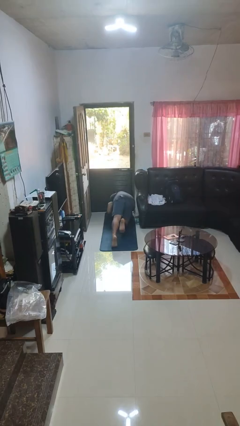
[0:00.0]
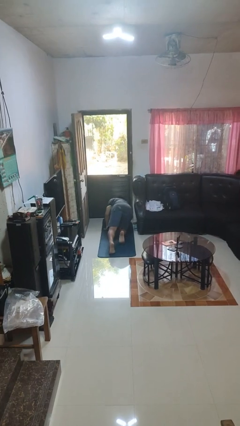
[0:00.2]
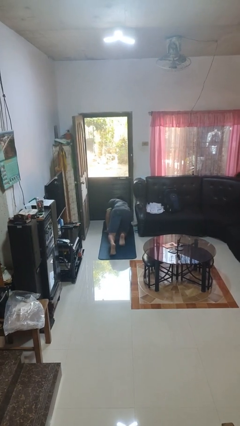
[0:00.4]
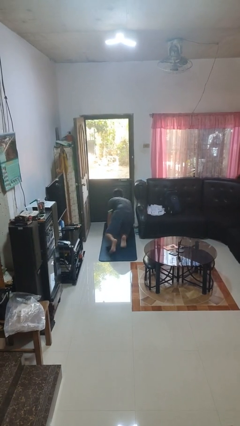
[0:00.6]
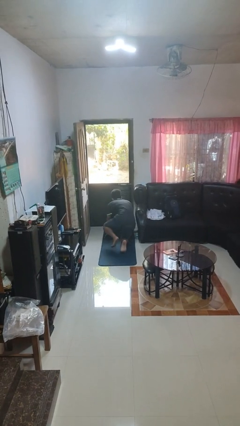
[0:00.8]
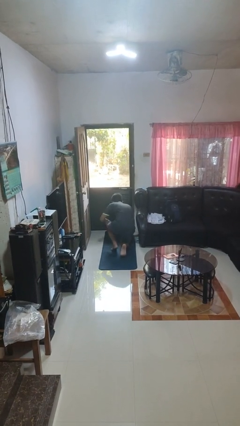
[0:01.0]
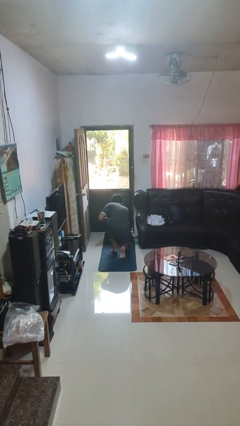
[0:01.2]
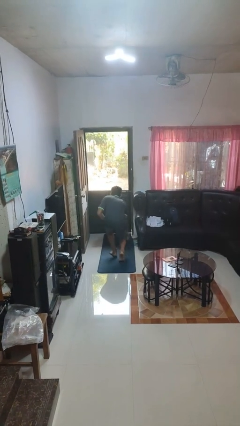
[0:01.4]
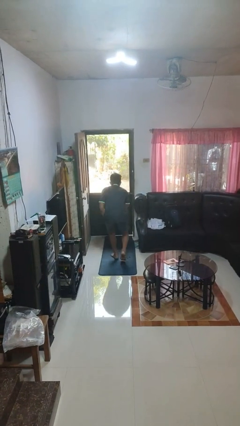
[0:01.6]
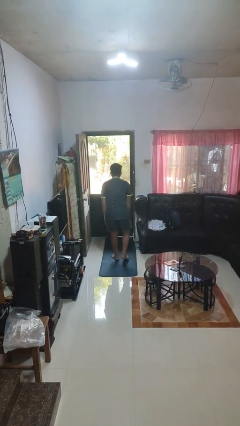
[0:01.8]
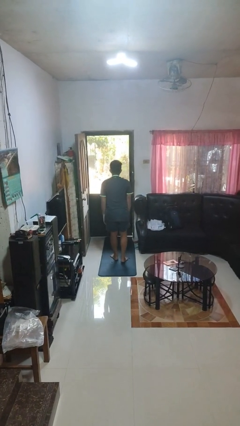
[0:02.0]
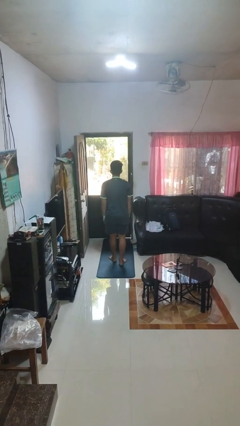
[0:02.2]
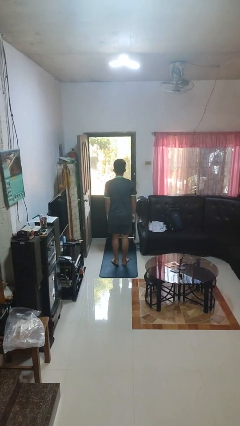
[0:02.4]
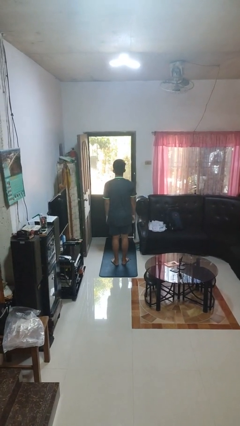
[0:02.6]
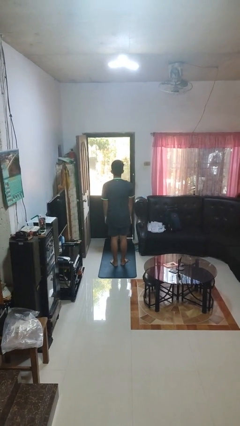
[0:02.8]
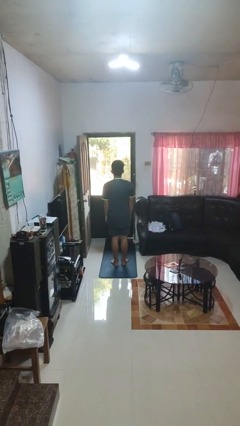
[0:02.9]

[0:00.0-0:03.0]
person stands up from floor

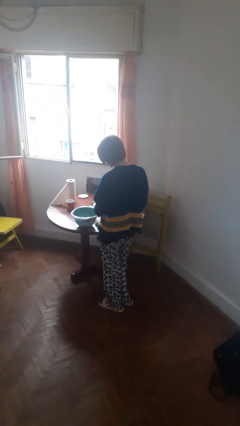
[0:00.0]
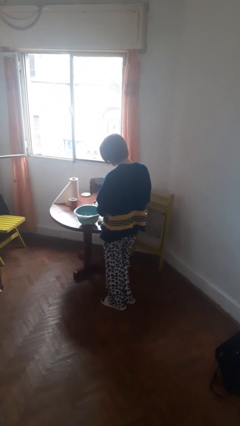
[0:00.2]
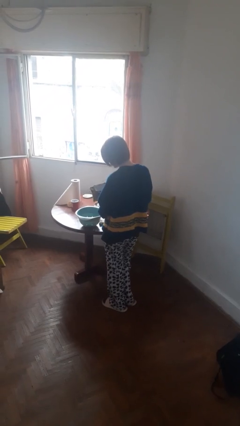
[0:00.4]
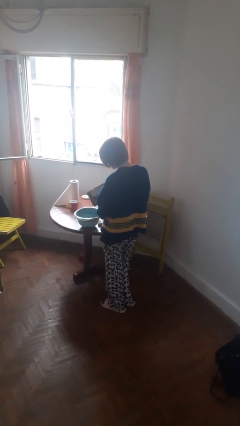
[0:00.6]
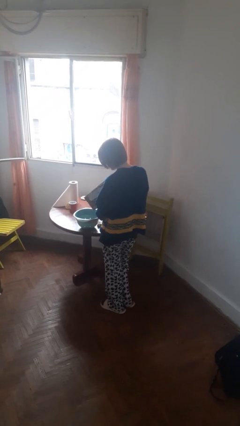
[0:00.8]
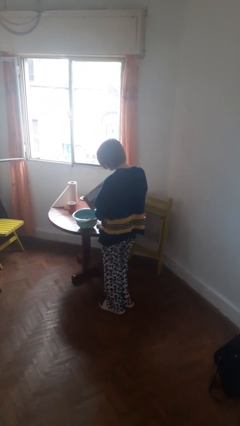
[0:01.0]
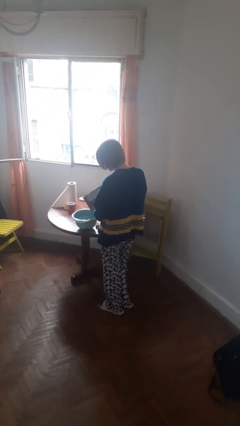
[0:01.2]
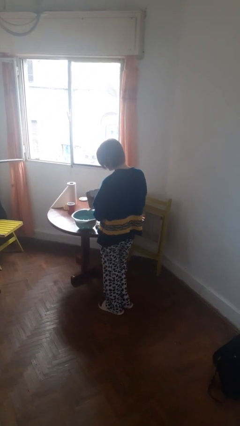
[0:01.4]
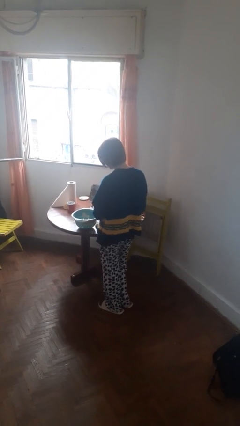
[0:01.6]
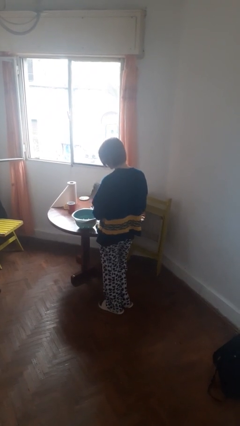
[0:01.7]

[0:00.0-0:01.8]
person pours into bowl

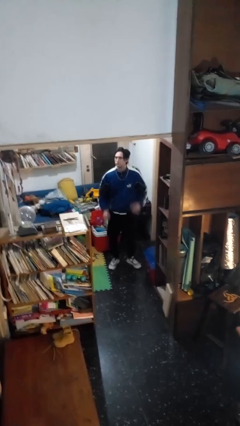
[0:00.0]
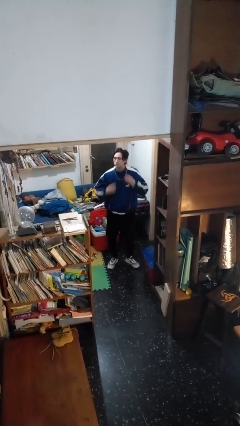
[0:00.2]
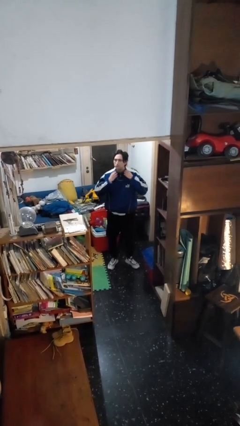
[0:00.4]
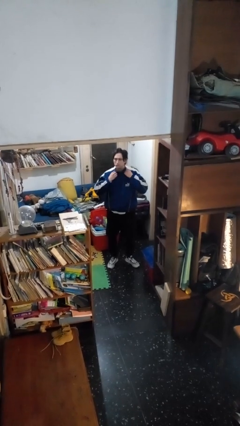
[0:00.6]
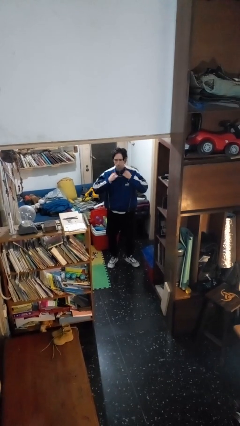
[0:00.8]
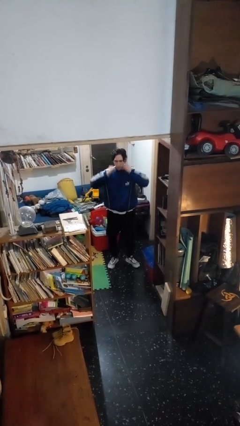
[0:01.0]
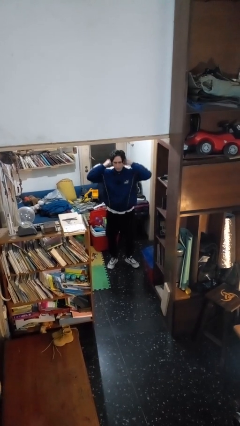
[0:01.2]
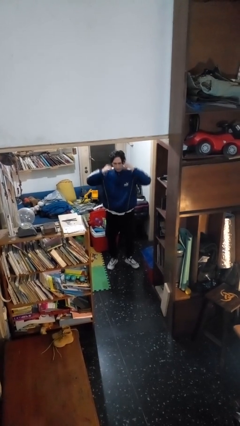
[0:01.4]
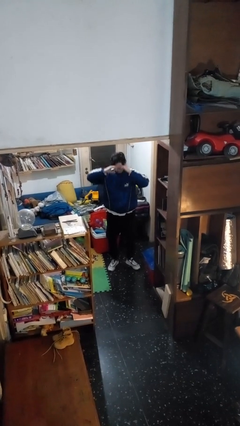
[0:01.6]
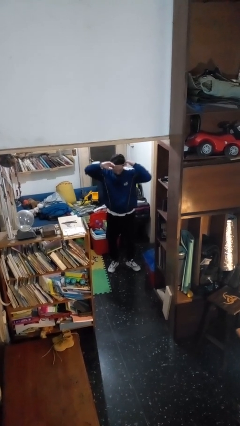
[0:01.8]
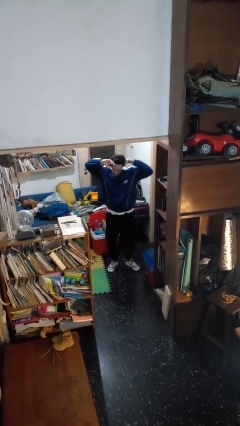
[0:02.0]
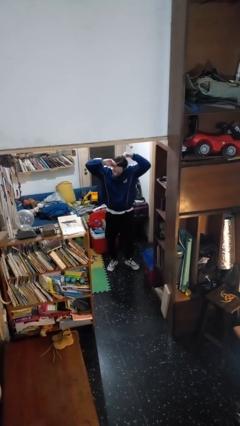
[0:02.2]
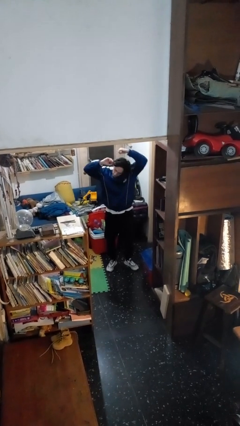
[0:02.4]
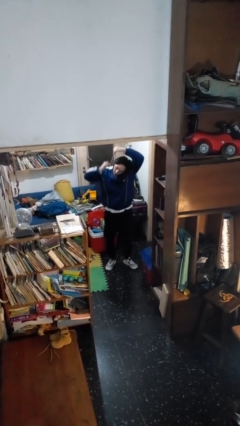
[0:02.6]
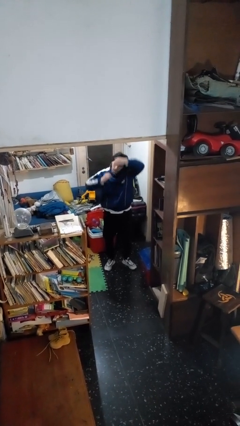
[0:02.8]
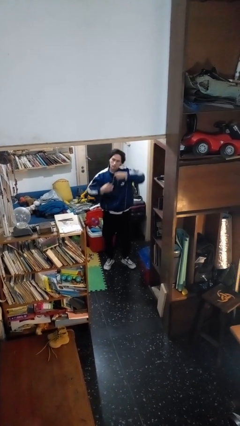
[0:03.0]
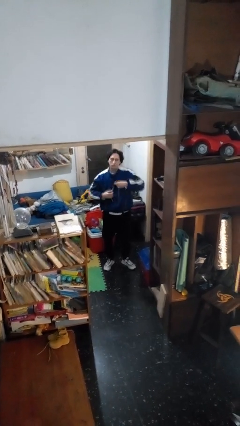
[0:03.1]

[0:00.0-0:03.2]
person takes off necklace

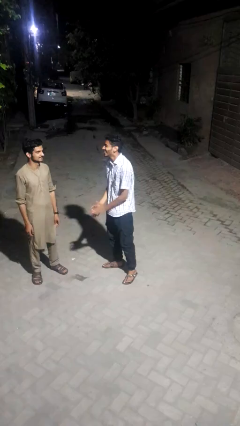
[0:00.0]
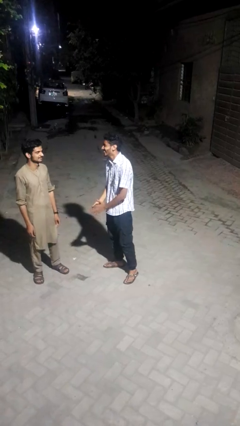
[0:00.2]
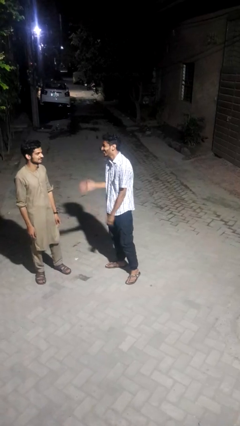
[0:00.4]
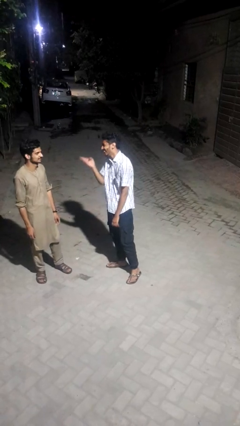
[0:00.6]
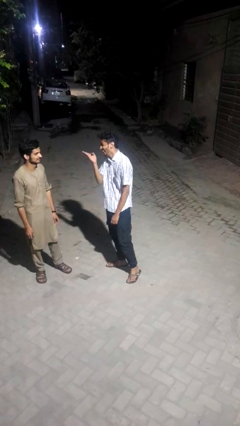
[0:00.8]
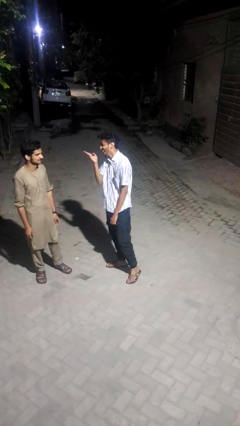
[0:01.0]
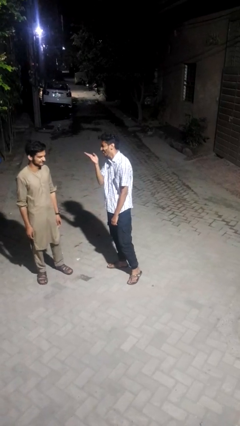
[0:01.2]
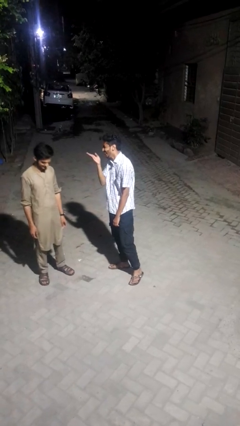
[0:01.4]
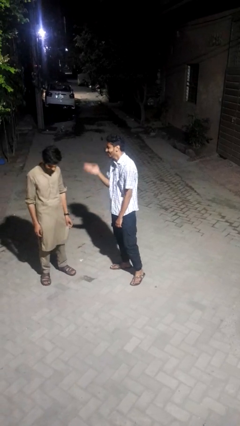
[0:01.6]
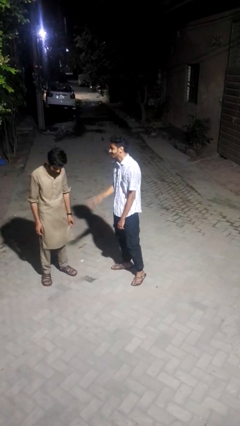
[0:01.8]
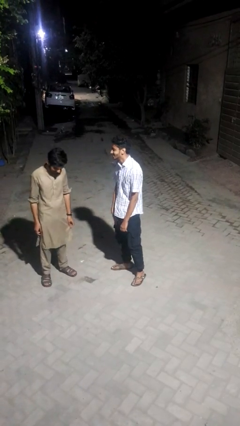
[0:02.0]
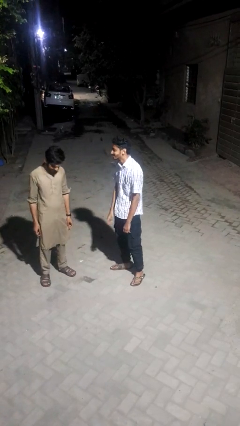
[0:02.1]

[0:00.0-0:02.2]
person laughs with person

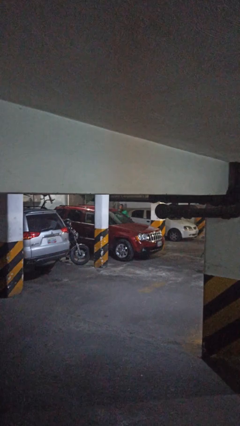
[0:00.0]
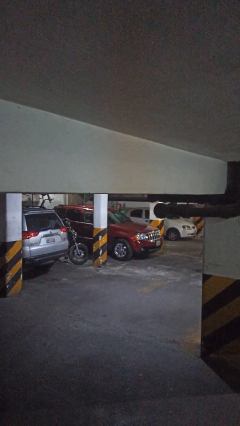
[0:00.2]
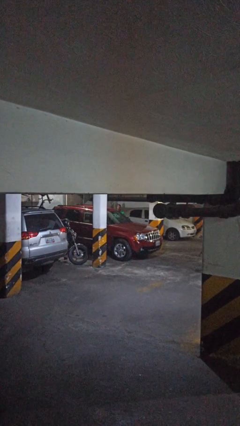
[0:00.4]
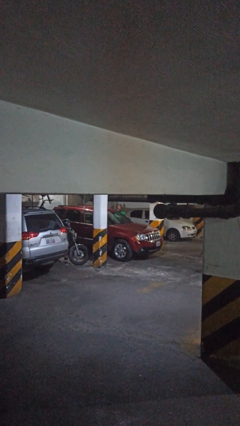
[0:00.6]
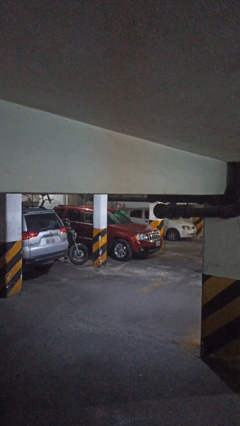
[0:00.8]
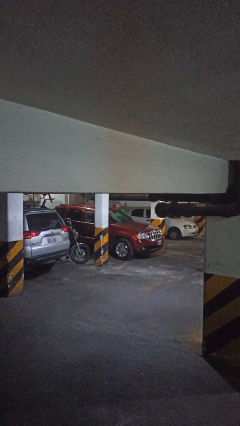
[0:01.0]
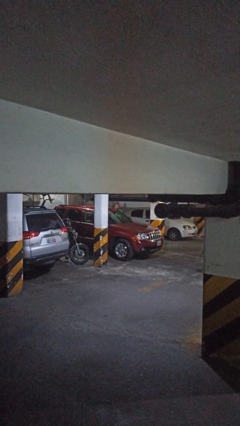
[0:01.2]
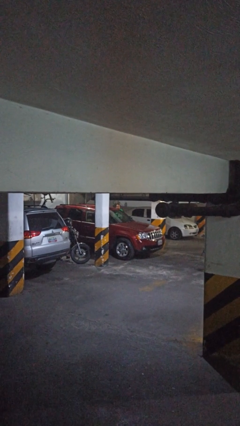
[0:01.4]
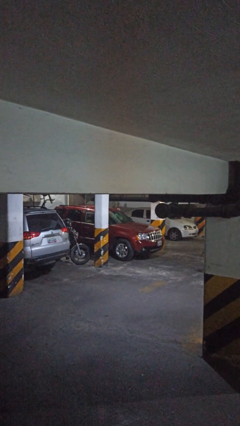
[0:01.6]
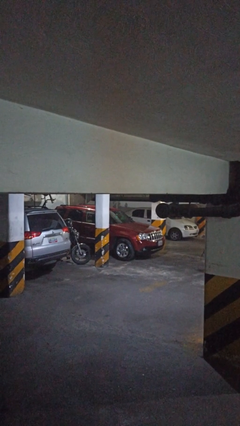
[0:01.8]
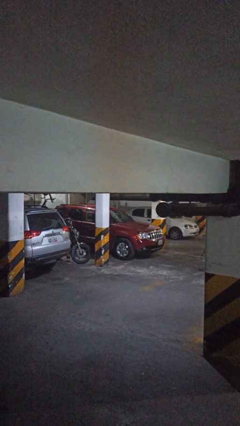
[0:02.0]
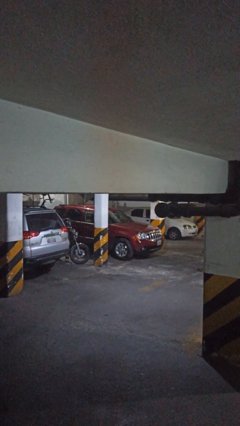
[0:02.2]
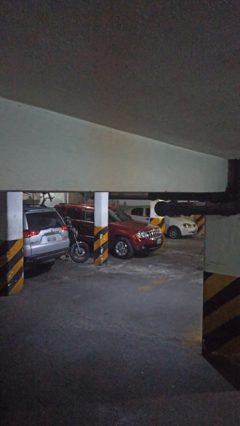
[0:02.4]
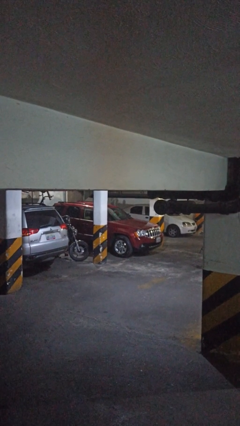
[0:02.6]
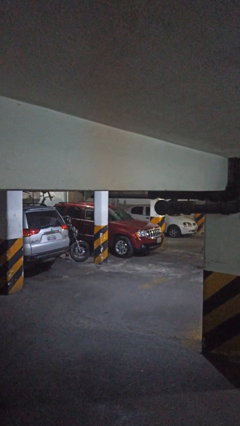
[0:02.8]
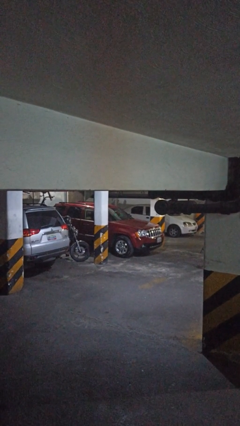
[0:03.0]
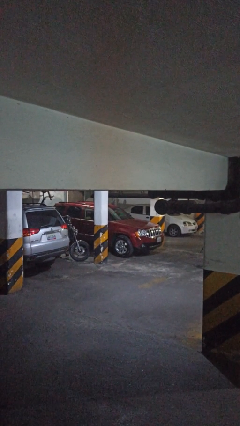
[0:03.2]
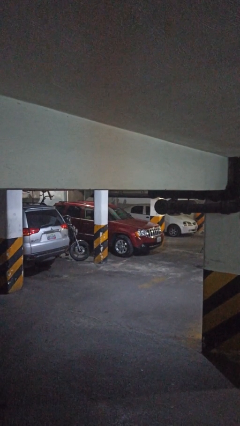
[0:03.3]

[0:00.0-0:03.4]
person enters car

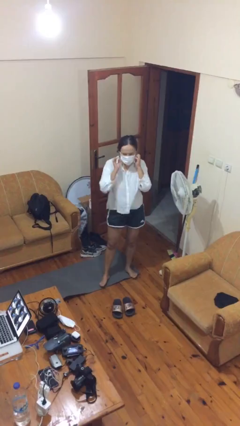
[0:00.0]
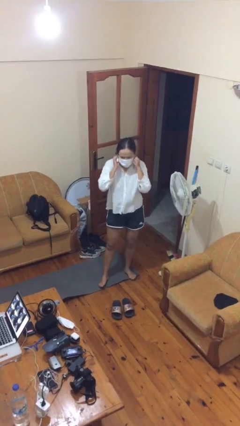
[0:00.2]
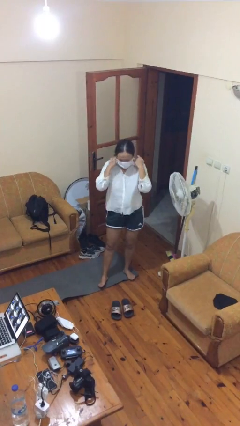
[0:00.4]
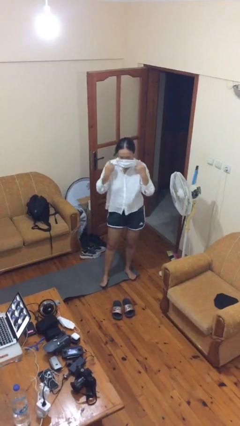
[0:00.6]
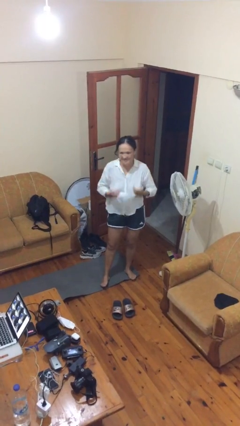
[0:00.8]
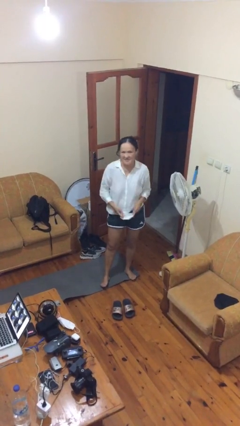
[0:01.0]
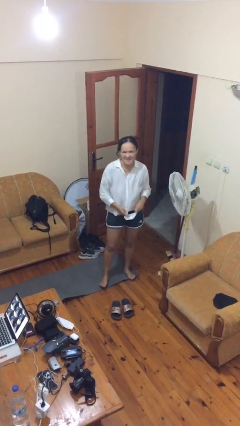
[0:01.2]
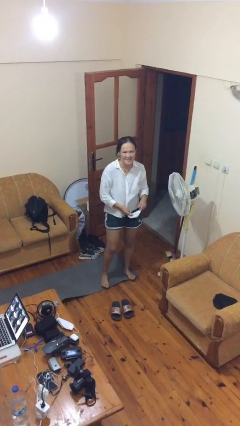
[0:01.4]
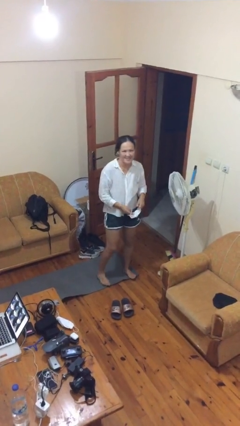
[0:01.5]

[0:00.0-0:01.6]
person takes off facemask

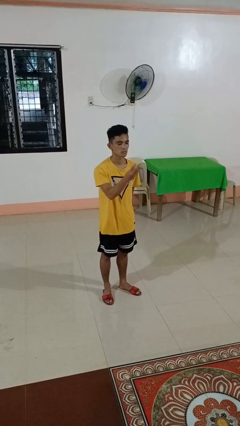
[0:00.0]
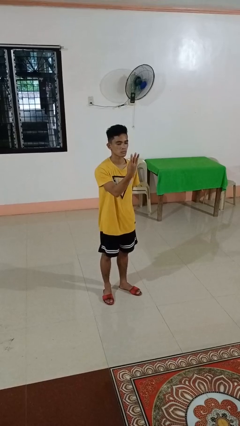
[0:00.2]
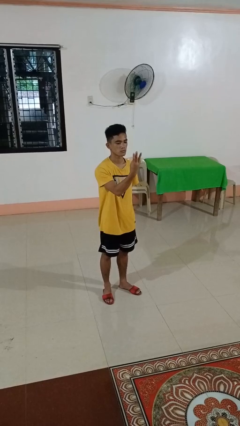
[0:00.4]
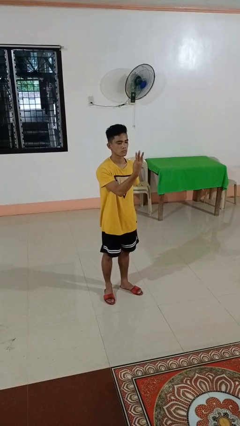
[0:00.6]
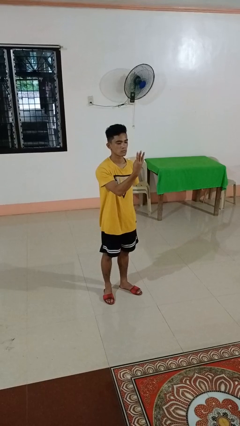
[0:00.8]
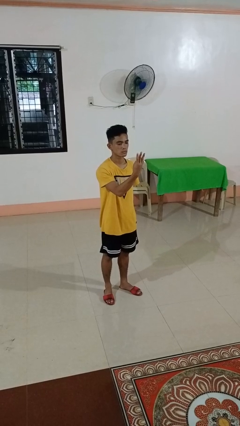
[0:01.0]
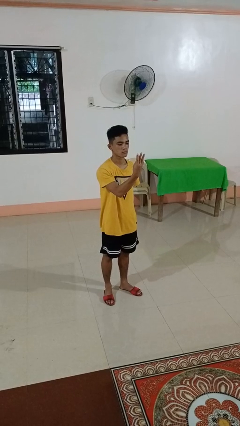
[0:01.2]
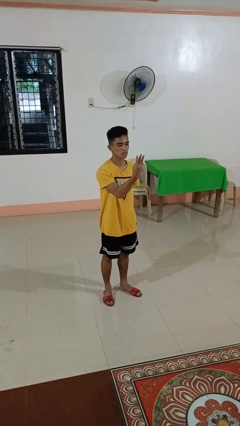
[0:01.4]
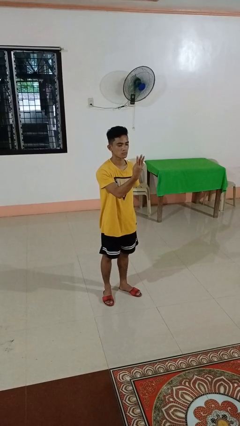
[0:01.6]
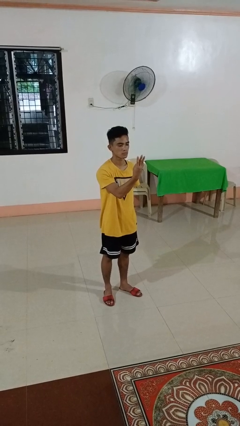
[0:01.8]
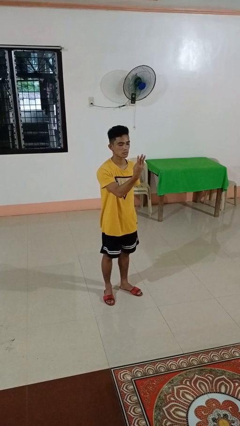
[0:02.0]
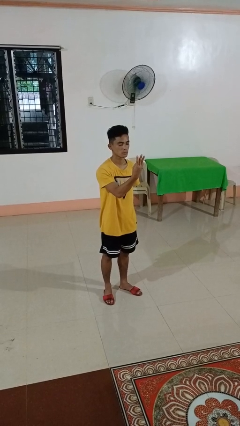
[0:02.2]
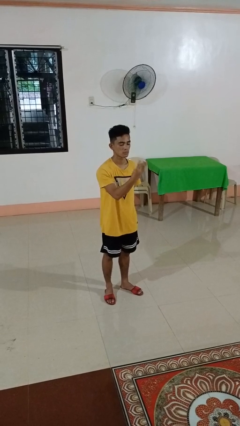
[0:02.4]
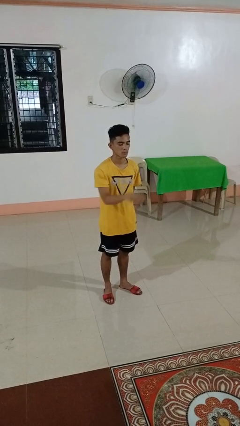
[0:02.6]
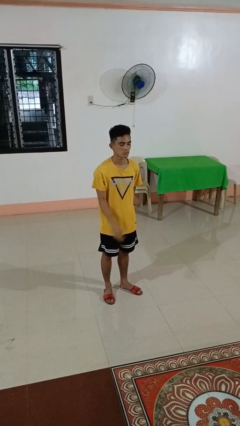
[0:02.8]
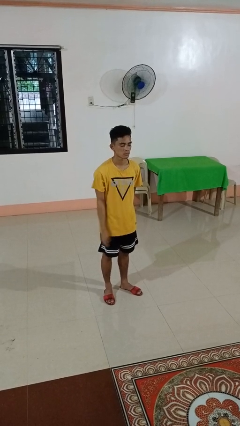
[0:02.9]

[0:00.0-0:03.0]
person gestures number three
